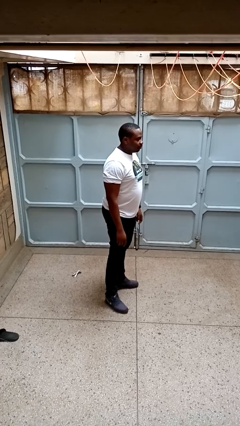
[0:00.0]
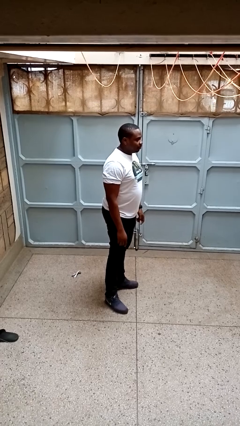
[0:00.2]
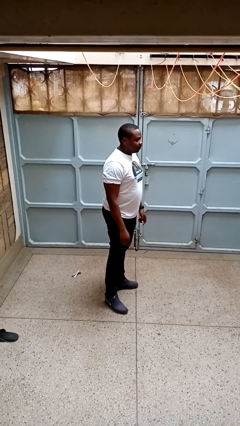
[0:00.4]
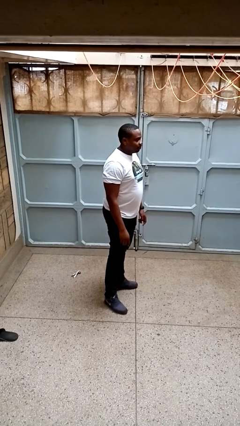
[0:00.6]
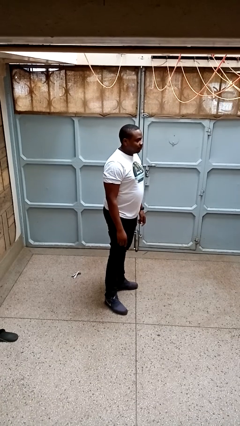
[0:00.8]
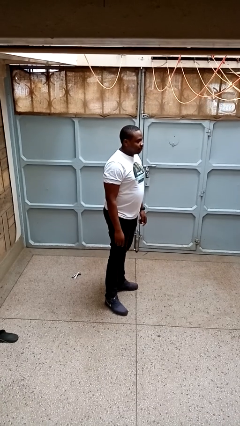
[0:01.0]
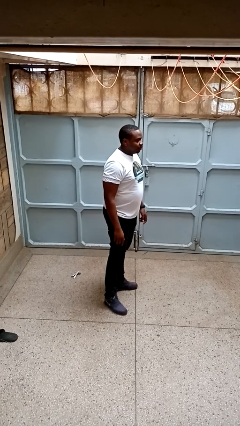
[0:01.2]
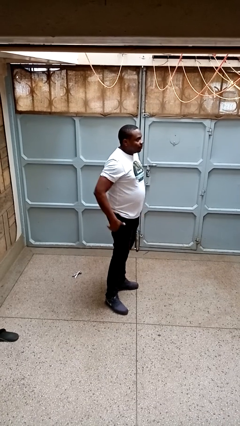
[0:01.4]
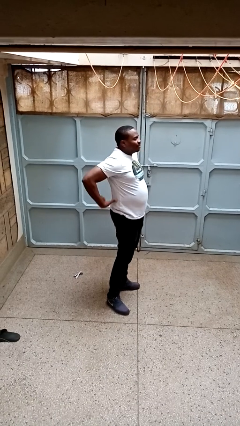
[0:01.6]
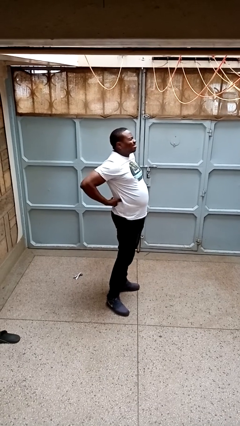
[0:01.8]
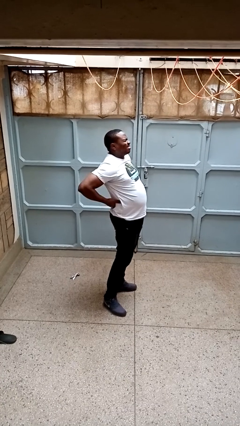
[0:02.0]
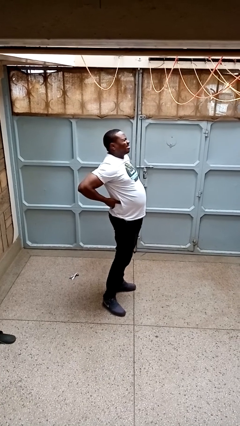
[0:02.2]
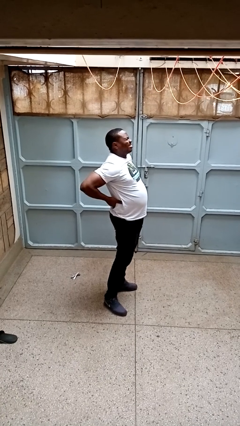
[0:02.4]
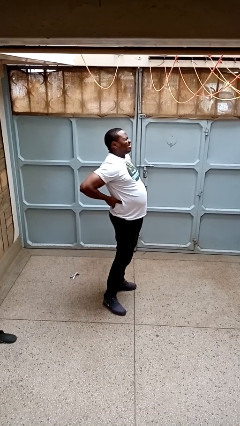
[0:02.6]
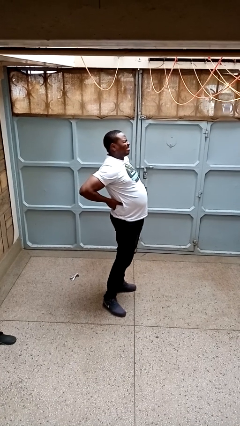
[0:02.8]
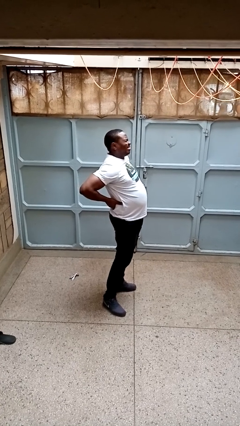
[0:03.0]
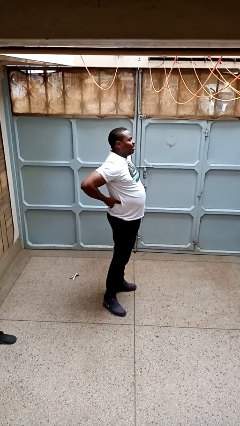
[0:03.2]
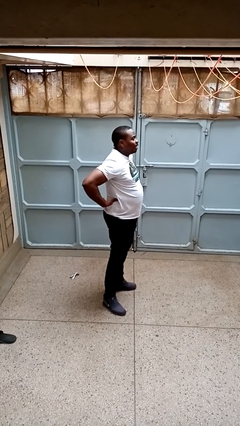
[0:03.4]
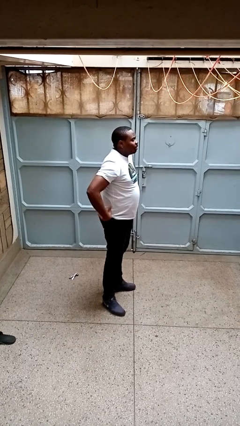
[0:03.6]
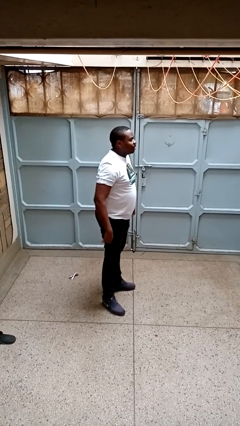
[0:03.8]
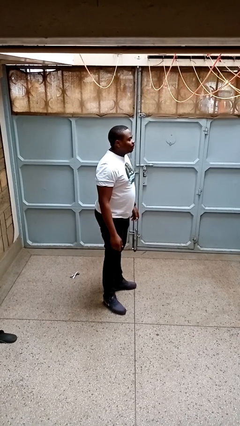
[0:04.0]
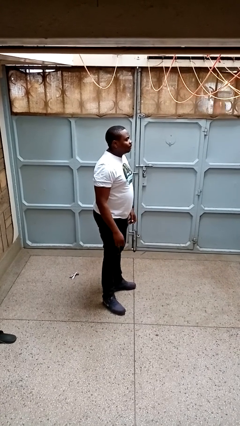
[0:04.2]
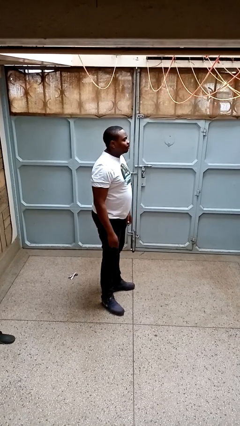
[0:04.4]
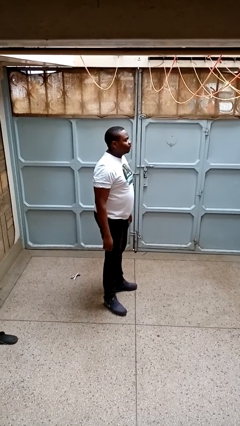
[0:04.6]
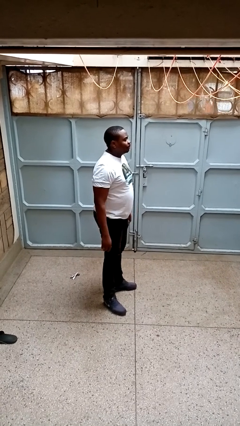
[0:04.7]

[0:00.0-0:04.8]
person stretches back

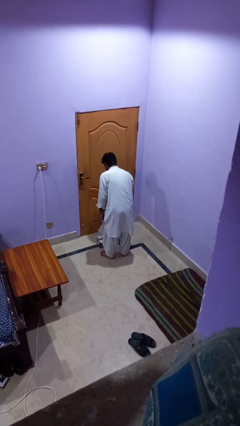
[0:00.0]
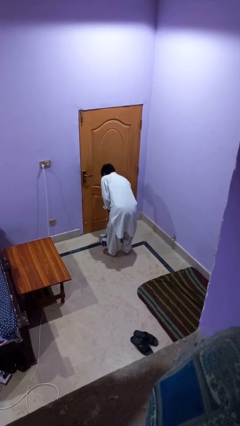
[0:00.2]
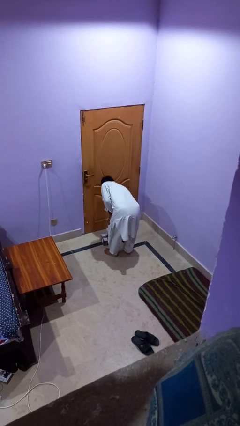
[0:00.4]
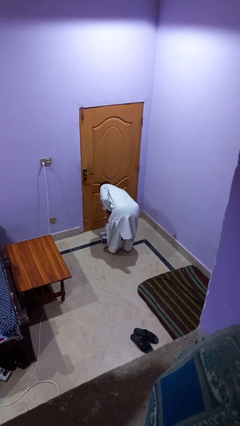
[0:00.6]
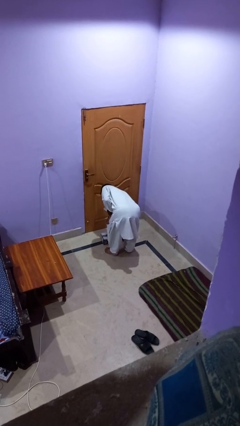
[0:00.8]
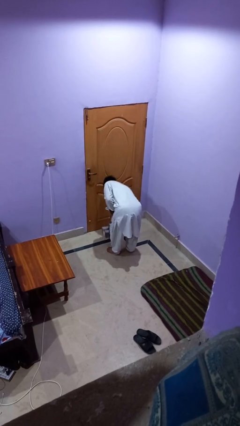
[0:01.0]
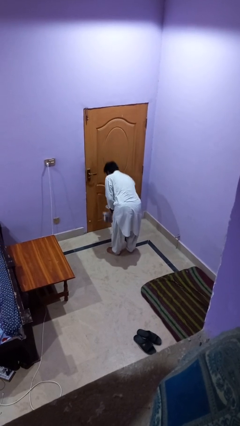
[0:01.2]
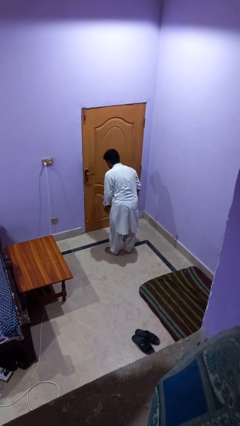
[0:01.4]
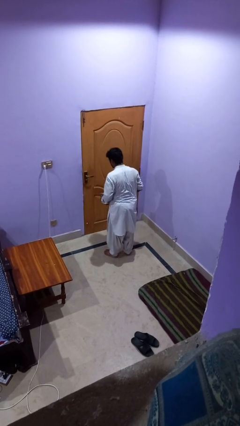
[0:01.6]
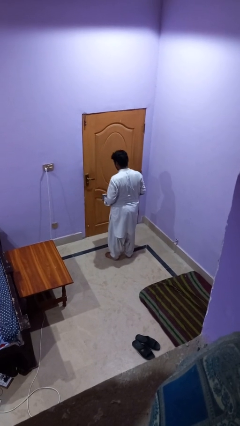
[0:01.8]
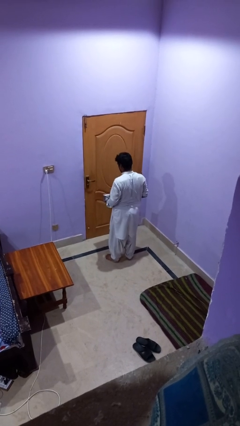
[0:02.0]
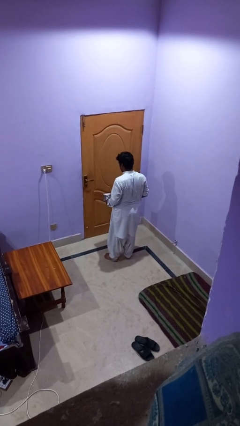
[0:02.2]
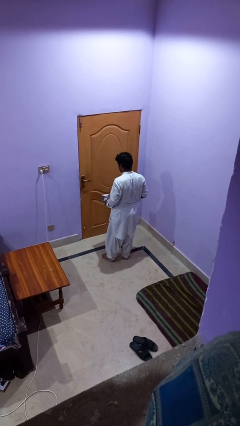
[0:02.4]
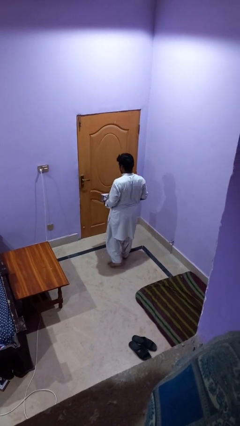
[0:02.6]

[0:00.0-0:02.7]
person picks up object from floor

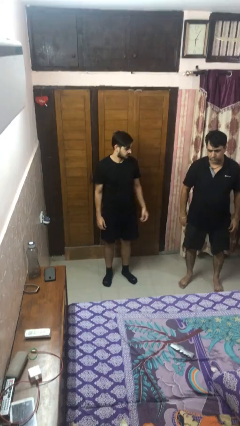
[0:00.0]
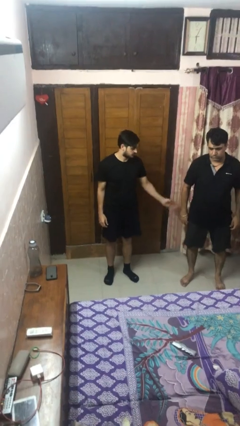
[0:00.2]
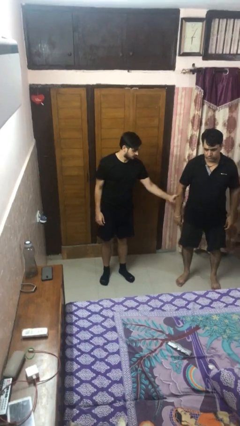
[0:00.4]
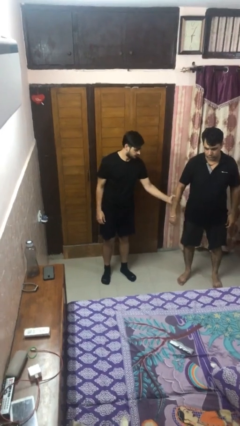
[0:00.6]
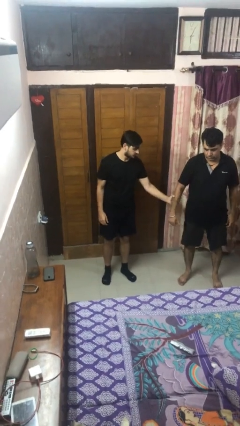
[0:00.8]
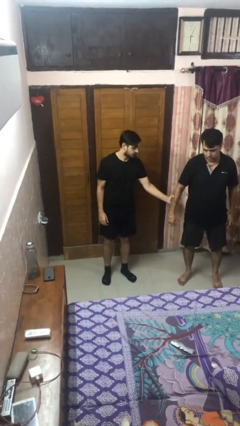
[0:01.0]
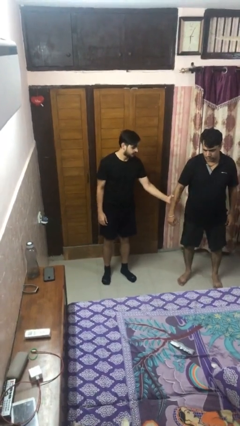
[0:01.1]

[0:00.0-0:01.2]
person grabs person by forearm

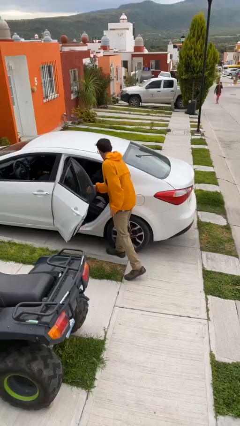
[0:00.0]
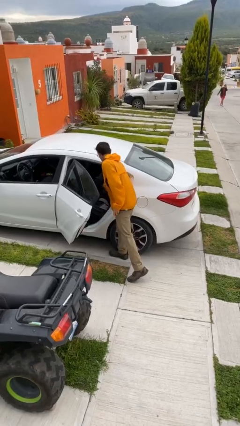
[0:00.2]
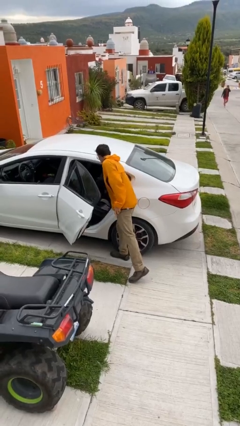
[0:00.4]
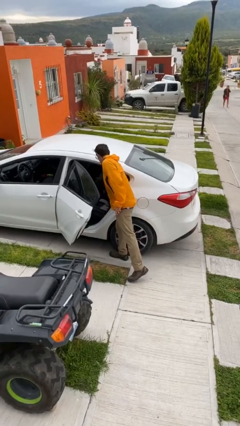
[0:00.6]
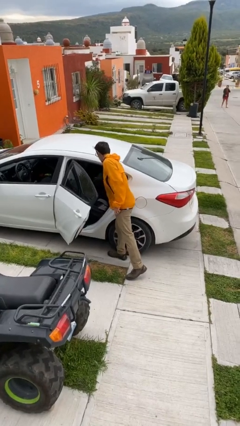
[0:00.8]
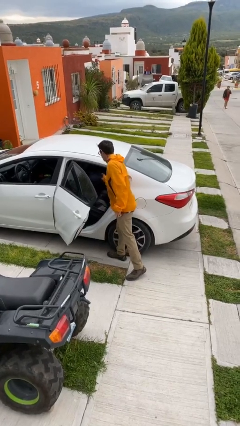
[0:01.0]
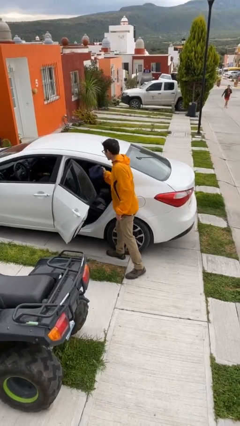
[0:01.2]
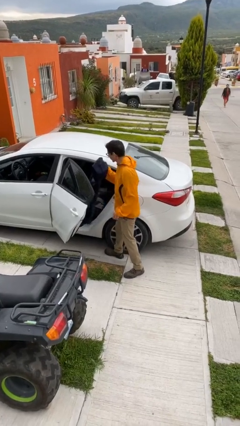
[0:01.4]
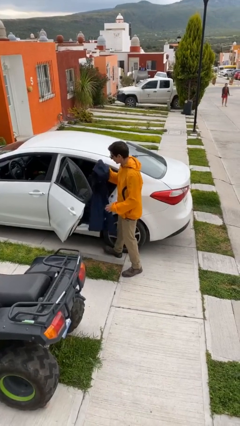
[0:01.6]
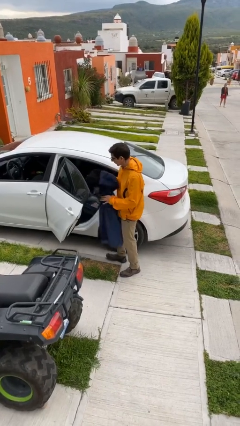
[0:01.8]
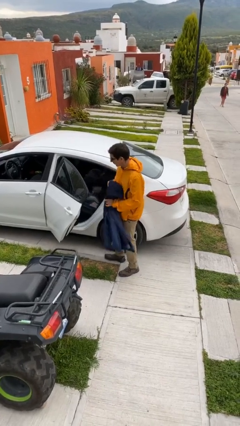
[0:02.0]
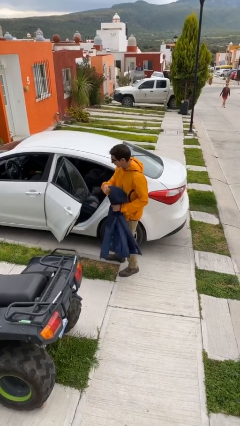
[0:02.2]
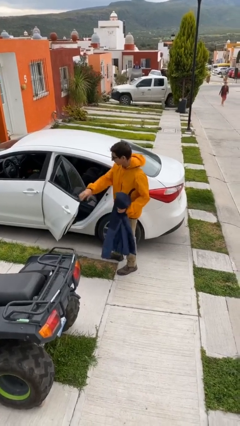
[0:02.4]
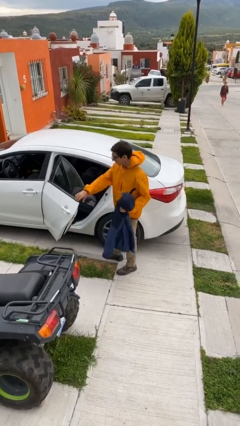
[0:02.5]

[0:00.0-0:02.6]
person unloads car

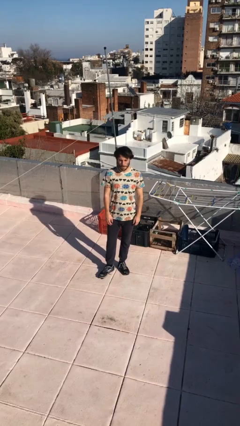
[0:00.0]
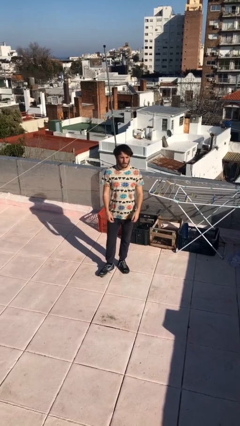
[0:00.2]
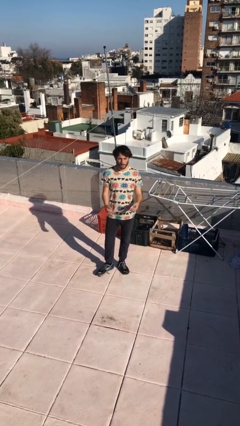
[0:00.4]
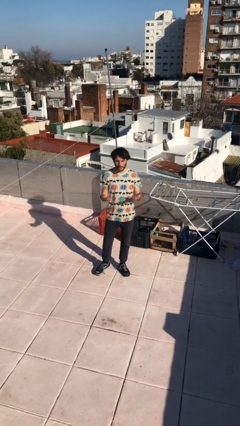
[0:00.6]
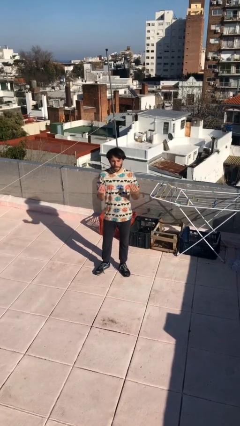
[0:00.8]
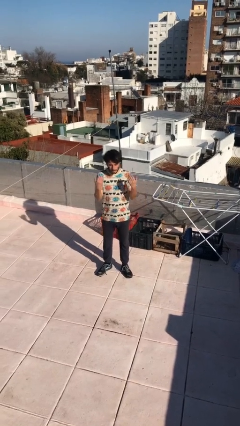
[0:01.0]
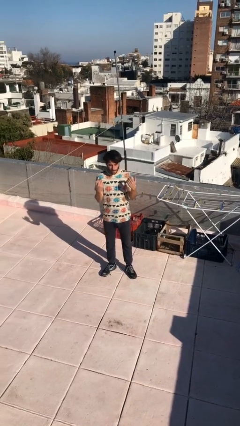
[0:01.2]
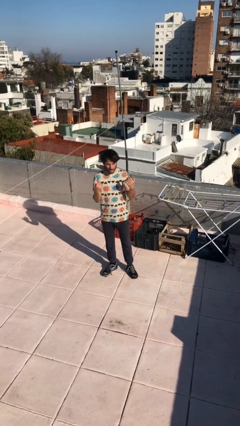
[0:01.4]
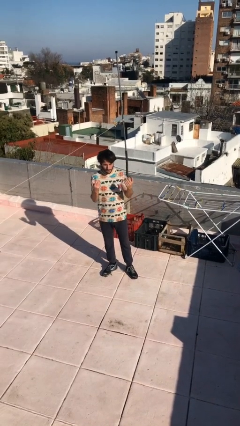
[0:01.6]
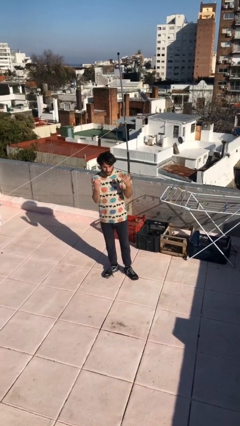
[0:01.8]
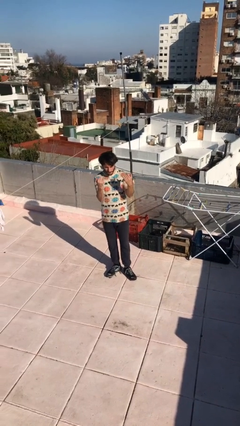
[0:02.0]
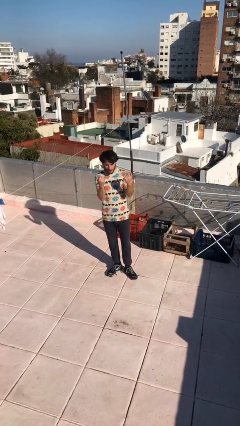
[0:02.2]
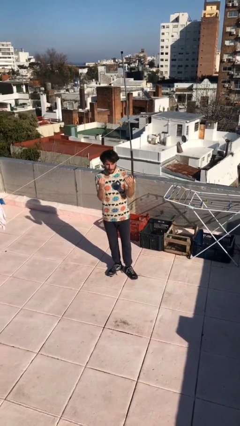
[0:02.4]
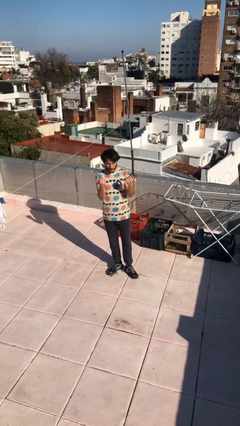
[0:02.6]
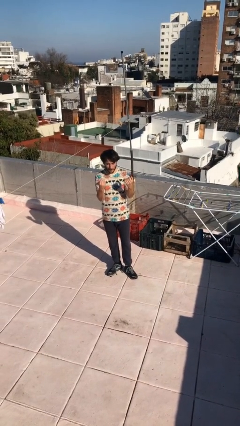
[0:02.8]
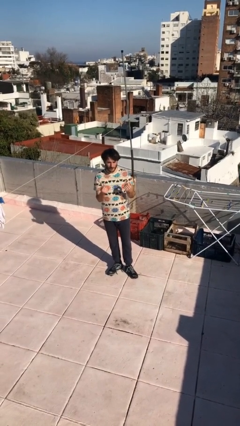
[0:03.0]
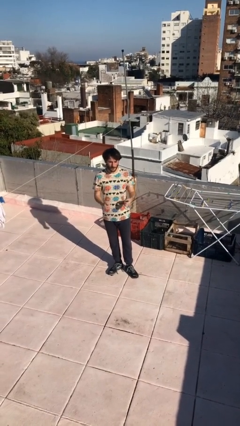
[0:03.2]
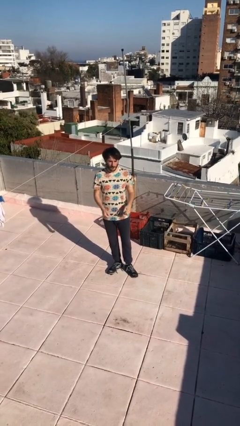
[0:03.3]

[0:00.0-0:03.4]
person gestures come here

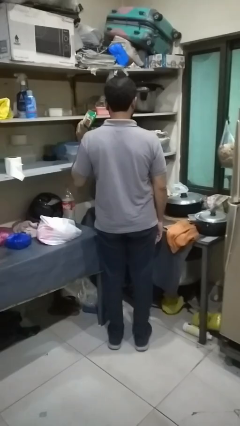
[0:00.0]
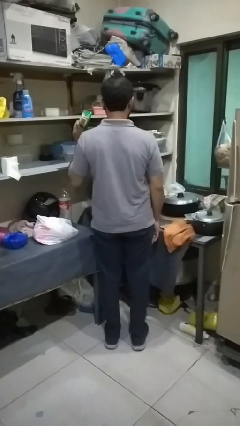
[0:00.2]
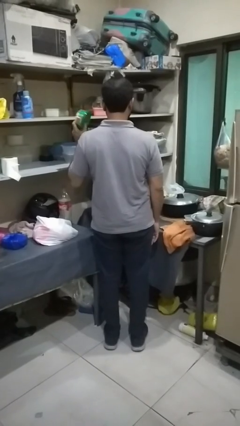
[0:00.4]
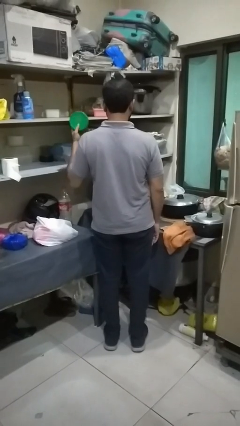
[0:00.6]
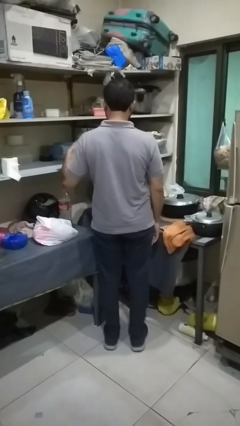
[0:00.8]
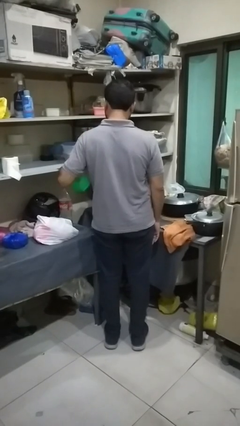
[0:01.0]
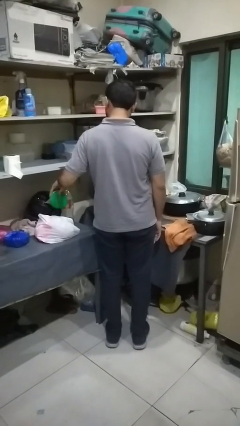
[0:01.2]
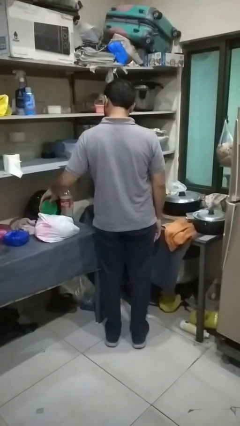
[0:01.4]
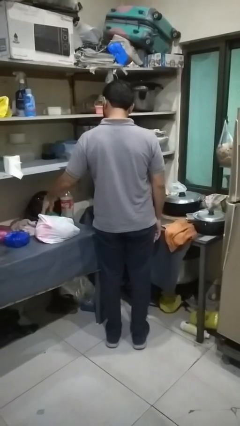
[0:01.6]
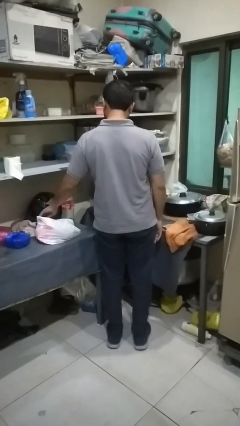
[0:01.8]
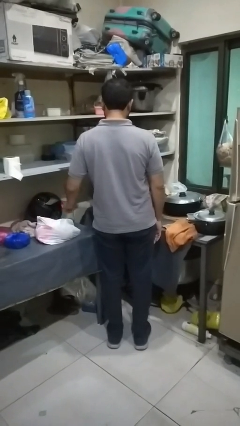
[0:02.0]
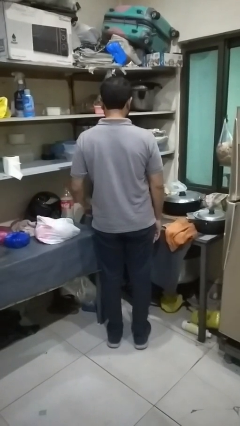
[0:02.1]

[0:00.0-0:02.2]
person puts object into bag

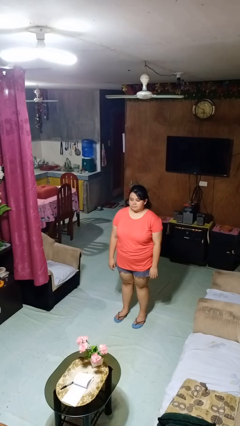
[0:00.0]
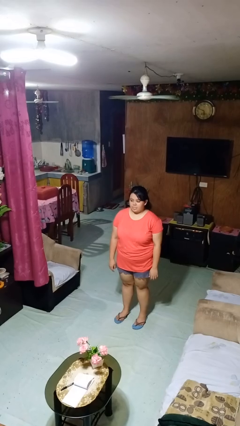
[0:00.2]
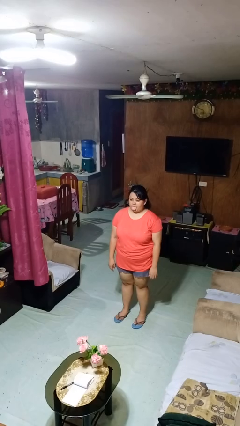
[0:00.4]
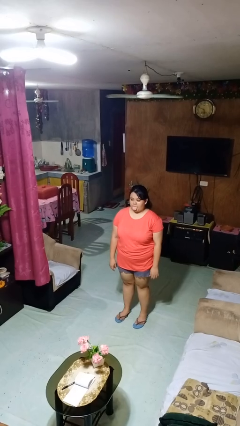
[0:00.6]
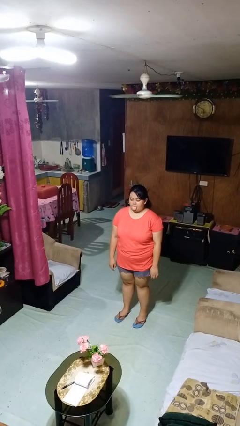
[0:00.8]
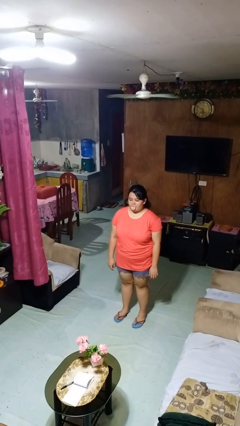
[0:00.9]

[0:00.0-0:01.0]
person sticks out tongue
